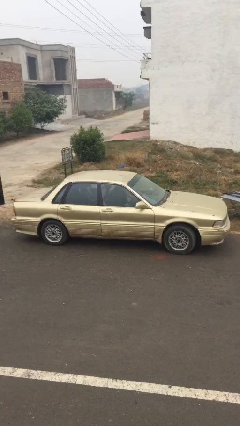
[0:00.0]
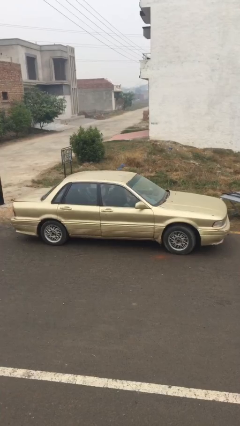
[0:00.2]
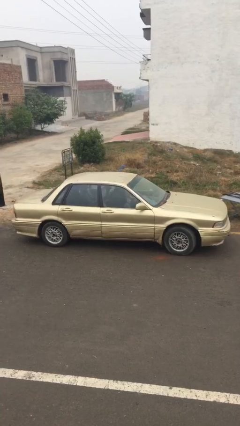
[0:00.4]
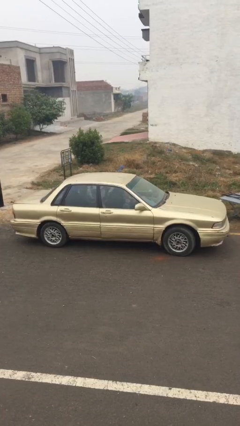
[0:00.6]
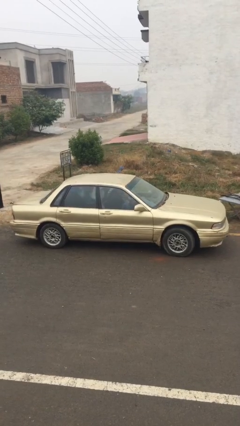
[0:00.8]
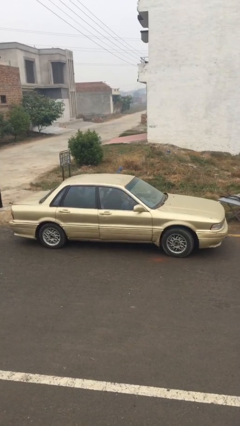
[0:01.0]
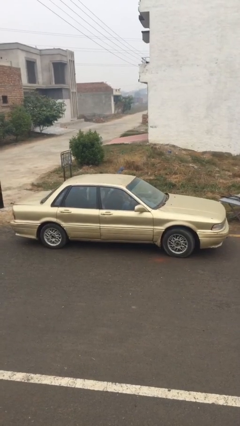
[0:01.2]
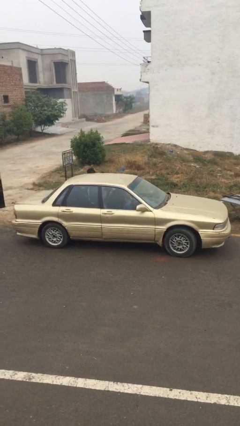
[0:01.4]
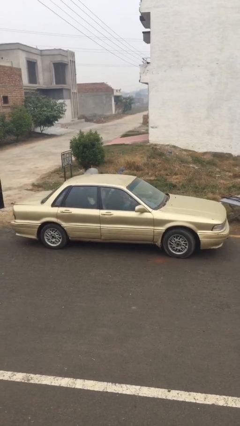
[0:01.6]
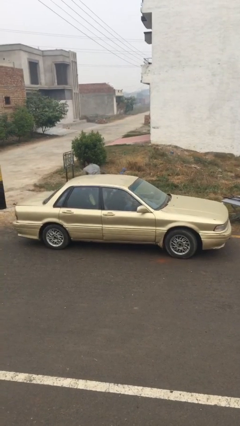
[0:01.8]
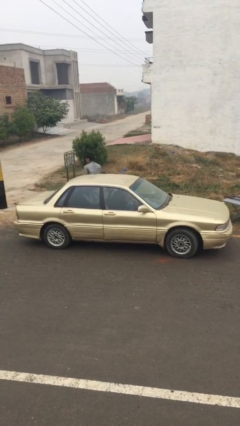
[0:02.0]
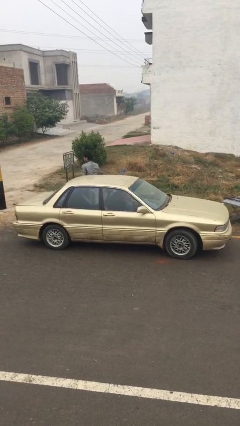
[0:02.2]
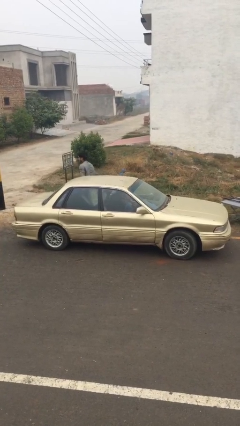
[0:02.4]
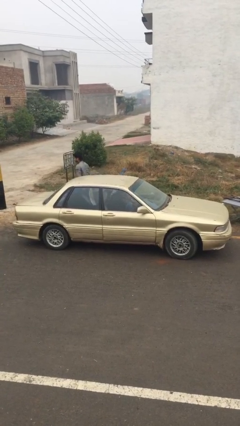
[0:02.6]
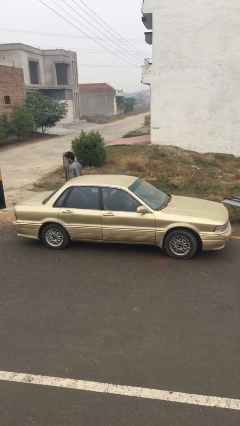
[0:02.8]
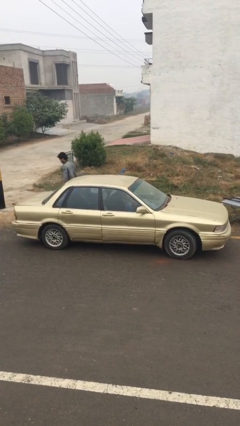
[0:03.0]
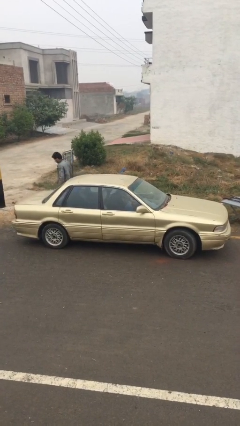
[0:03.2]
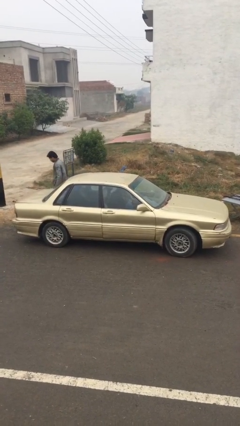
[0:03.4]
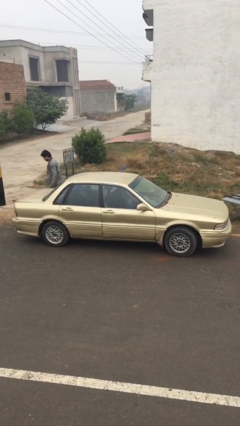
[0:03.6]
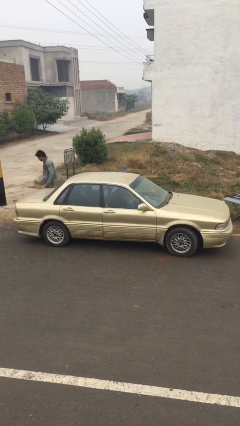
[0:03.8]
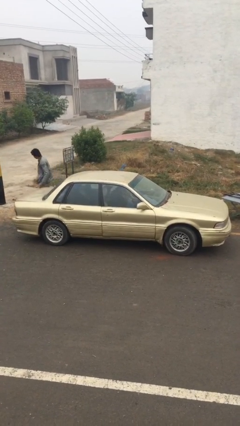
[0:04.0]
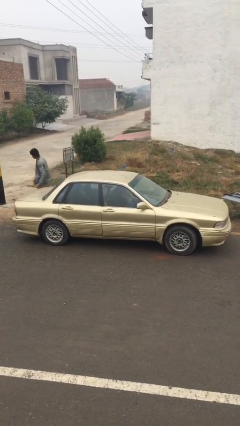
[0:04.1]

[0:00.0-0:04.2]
car drops off person

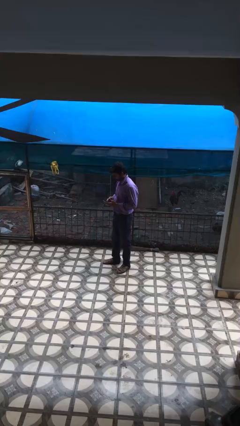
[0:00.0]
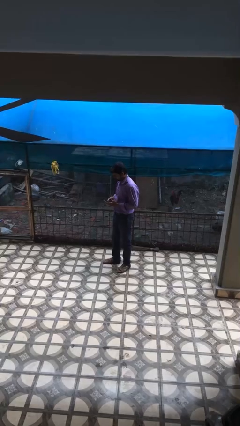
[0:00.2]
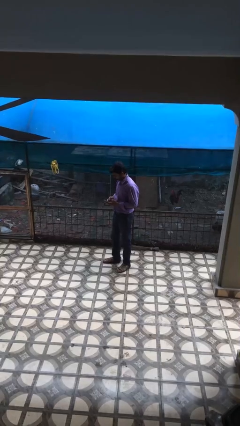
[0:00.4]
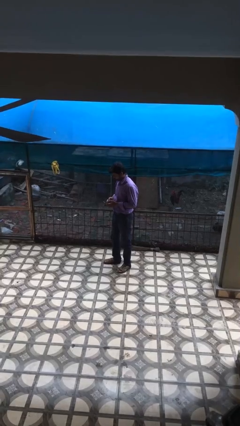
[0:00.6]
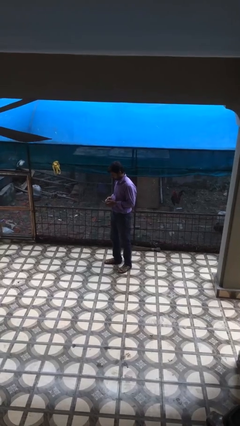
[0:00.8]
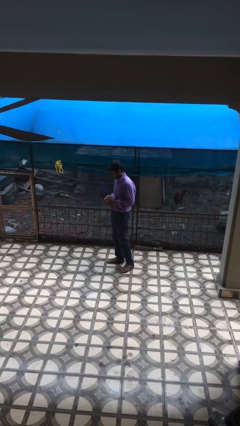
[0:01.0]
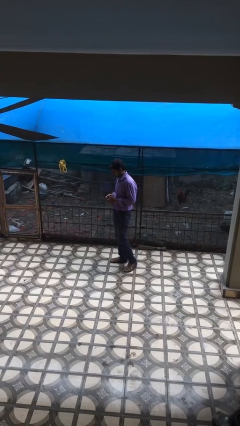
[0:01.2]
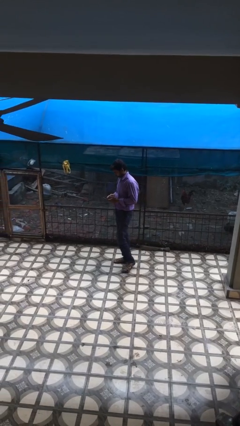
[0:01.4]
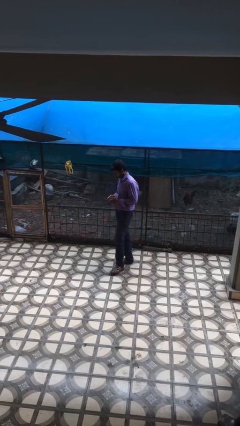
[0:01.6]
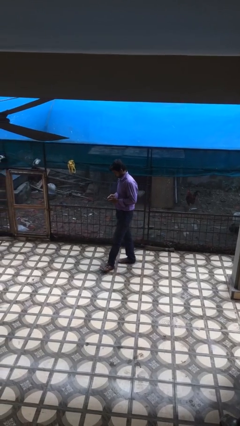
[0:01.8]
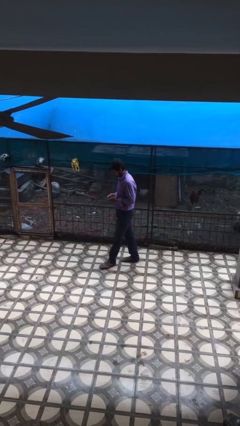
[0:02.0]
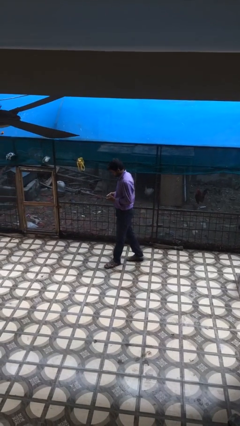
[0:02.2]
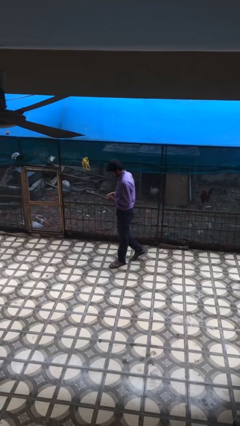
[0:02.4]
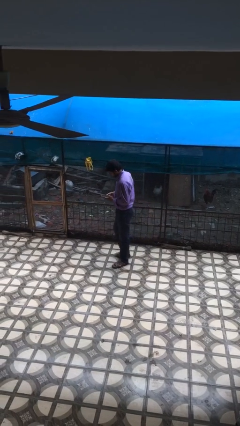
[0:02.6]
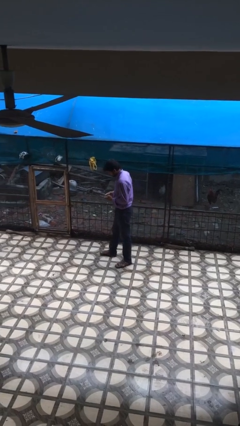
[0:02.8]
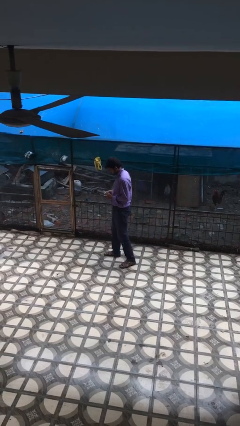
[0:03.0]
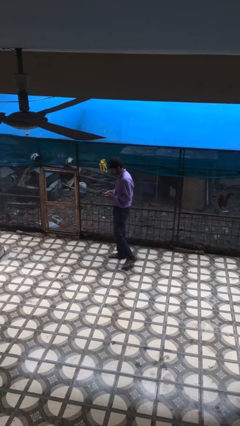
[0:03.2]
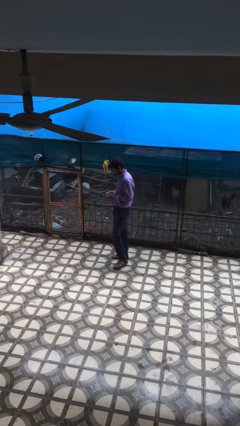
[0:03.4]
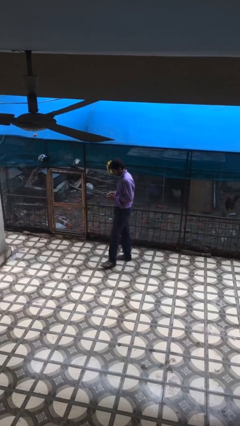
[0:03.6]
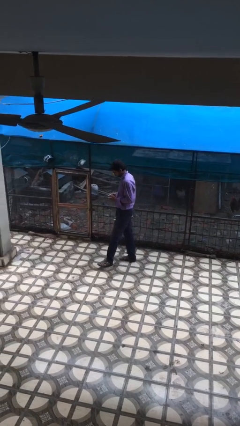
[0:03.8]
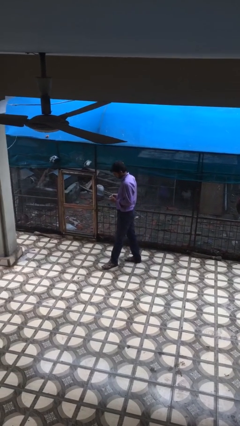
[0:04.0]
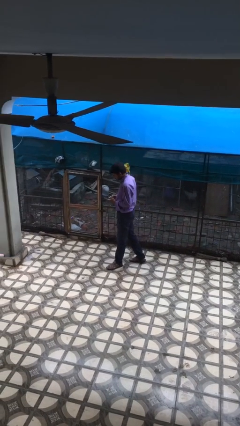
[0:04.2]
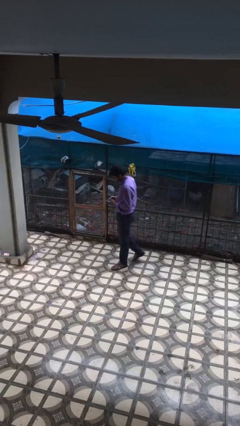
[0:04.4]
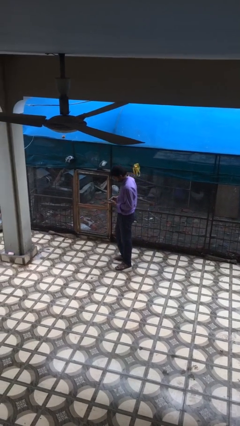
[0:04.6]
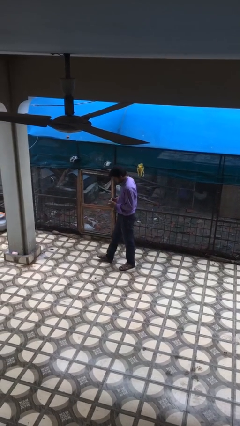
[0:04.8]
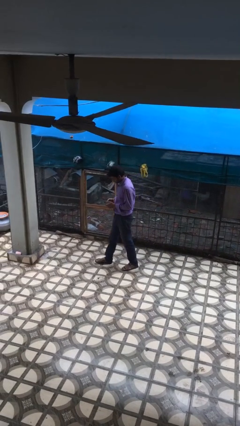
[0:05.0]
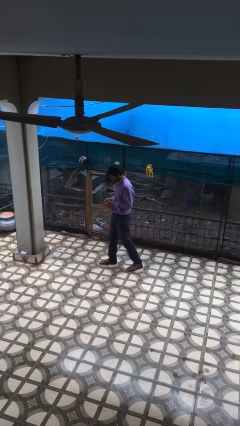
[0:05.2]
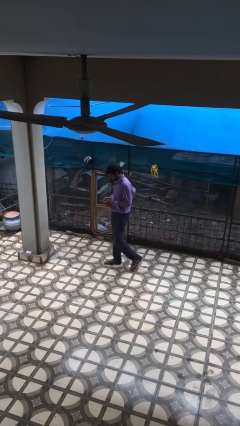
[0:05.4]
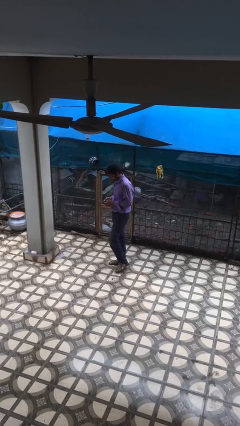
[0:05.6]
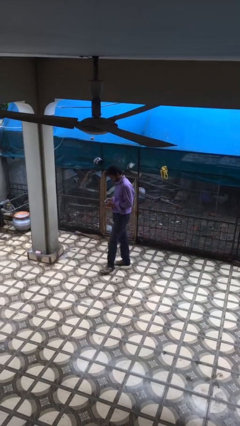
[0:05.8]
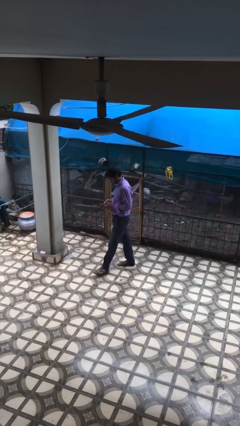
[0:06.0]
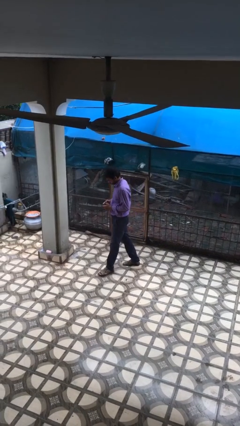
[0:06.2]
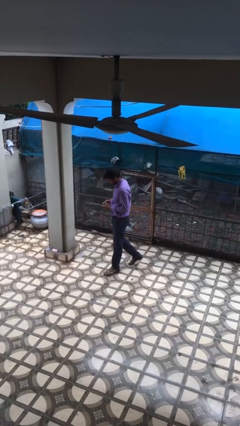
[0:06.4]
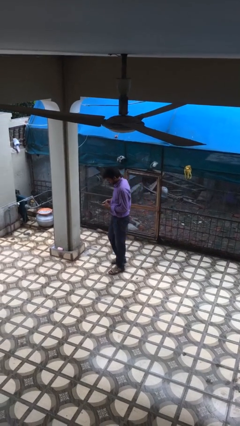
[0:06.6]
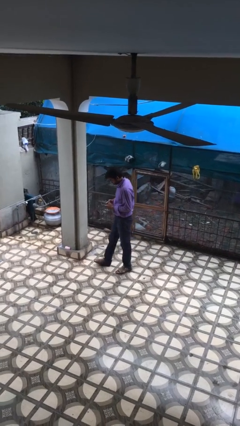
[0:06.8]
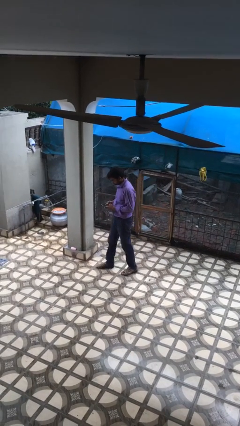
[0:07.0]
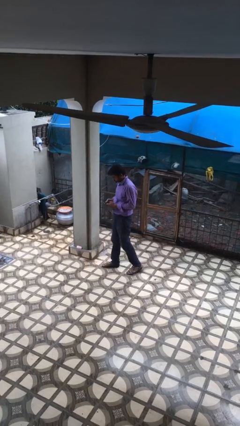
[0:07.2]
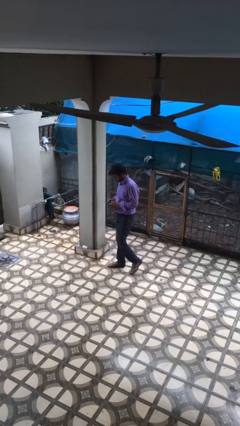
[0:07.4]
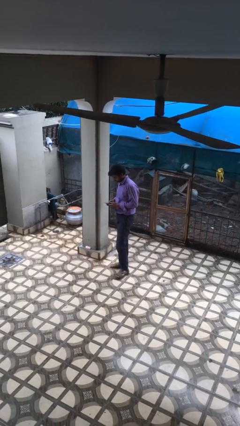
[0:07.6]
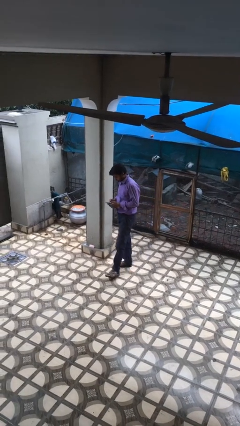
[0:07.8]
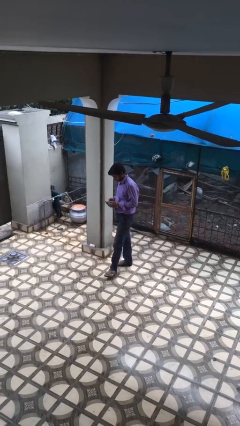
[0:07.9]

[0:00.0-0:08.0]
person texts on phone

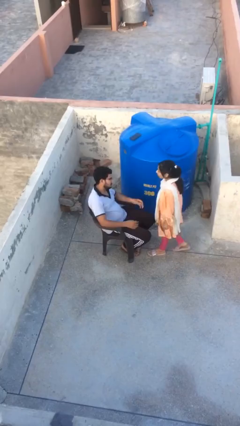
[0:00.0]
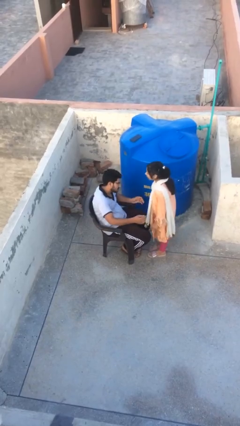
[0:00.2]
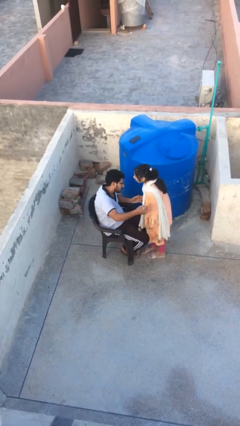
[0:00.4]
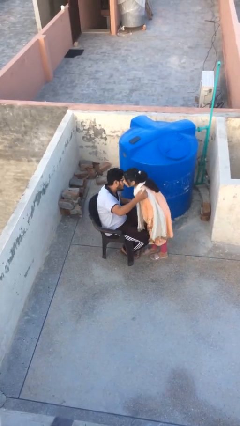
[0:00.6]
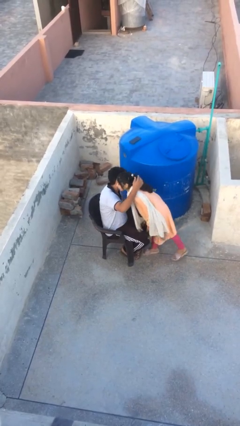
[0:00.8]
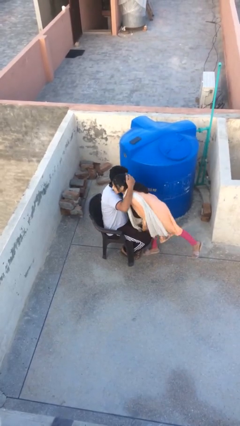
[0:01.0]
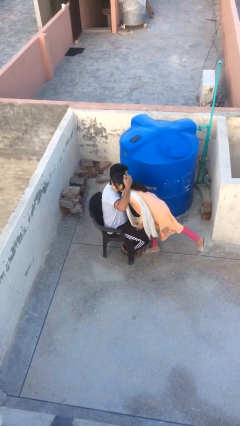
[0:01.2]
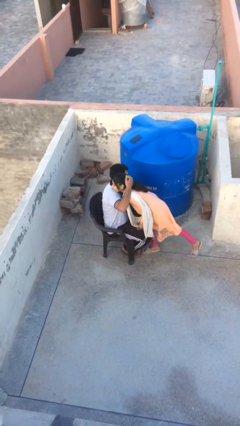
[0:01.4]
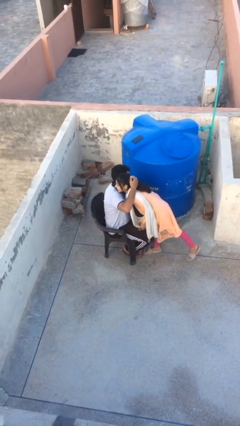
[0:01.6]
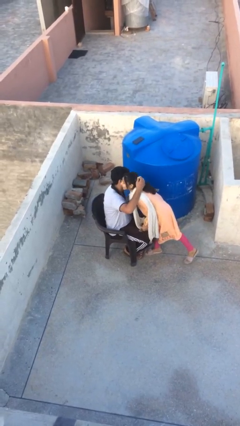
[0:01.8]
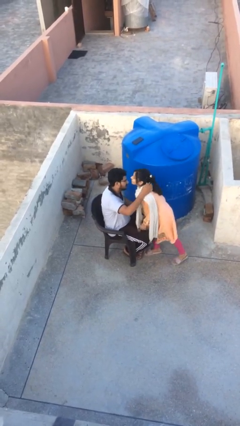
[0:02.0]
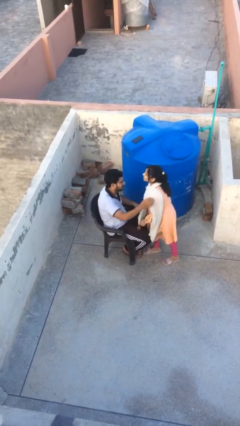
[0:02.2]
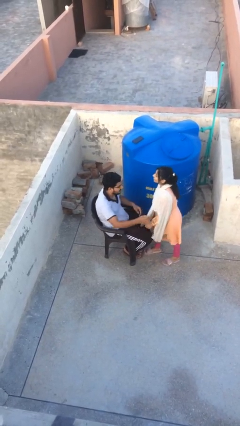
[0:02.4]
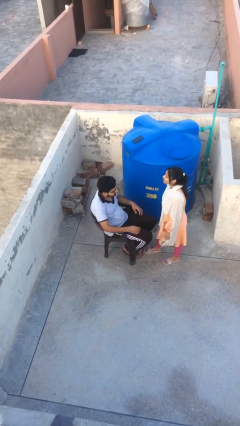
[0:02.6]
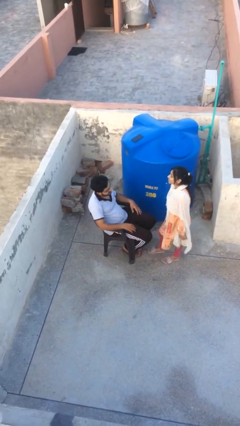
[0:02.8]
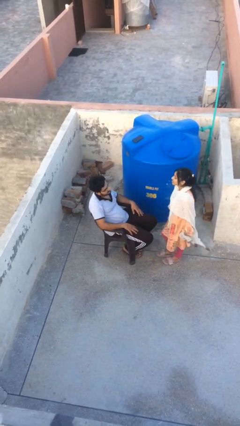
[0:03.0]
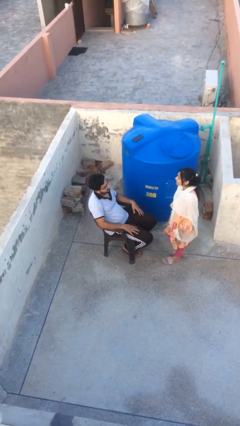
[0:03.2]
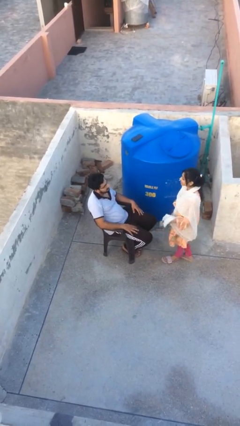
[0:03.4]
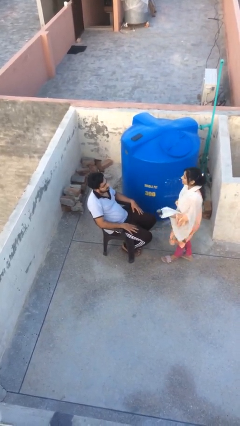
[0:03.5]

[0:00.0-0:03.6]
person embraces person

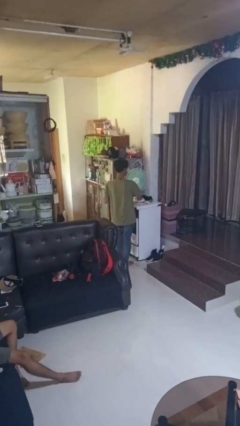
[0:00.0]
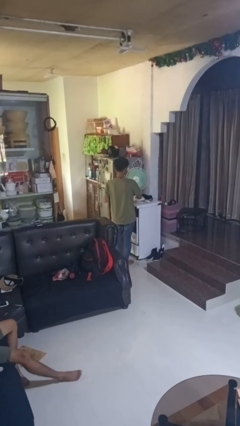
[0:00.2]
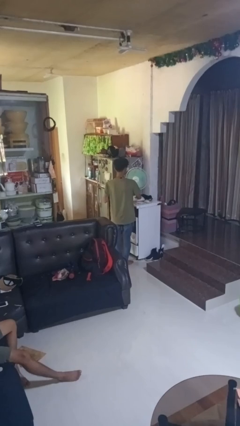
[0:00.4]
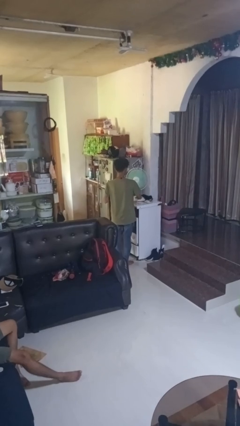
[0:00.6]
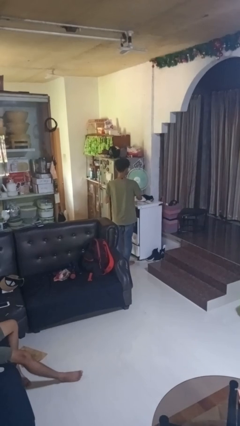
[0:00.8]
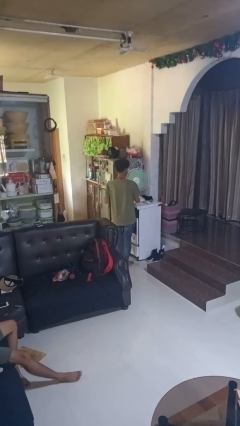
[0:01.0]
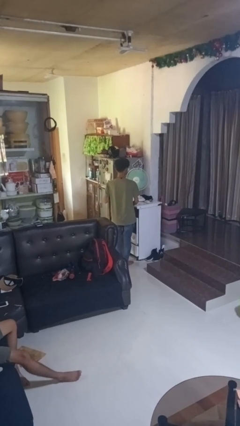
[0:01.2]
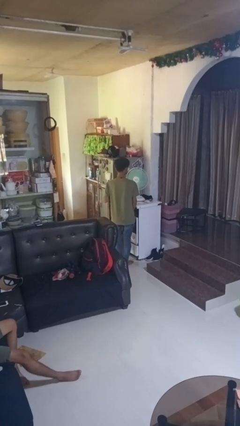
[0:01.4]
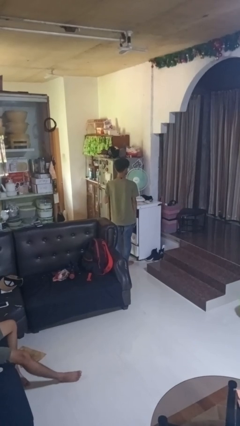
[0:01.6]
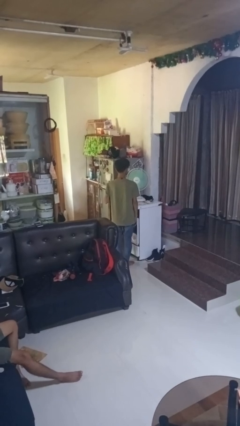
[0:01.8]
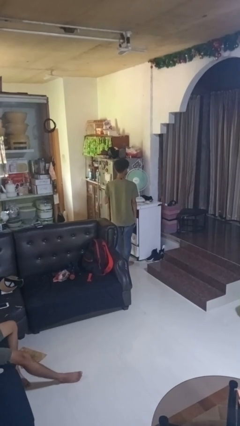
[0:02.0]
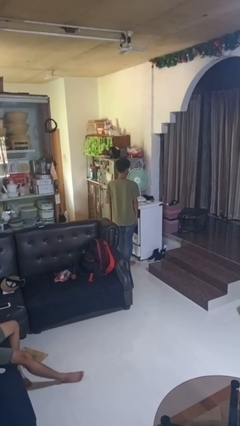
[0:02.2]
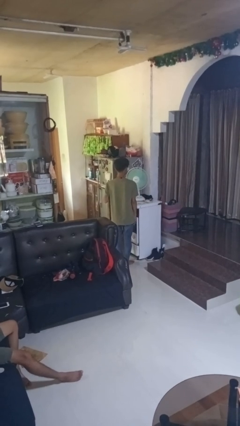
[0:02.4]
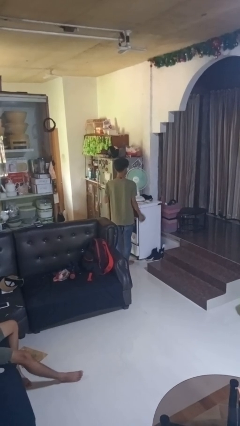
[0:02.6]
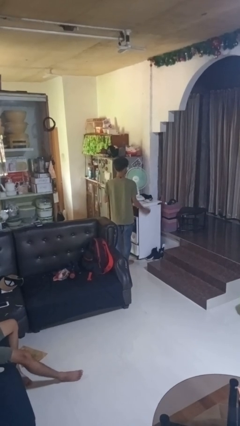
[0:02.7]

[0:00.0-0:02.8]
person turns on fan
